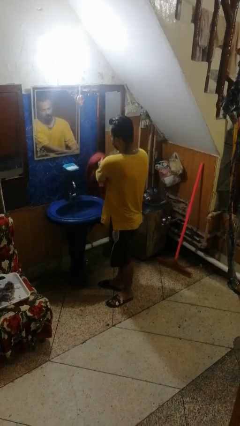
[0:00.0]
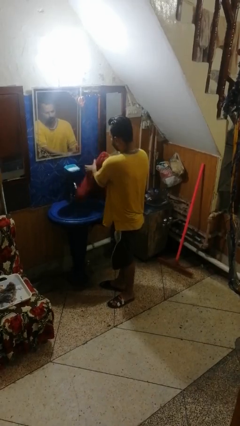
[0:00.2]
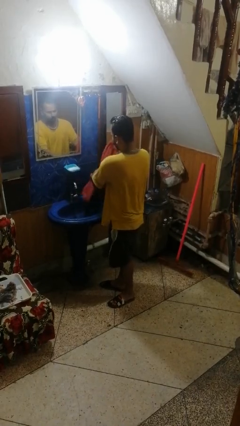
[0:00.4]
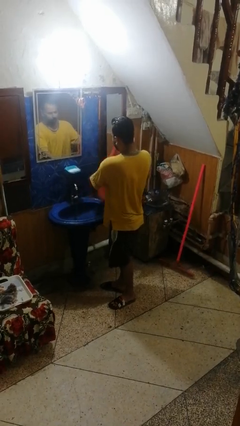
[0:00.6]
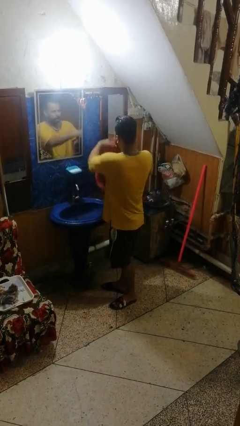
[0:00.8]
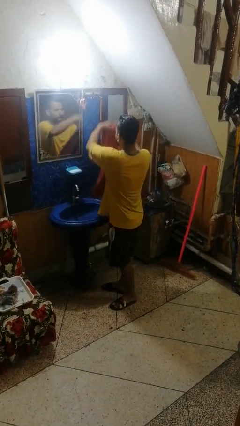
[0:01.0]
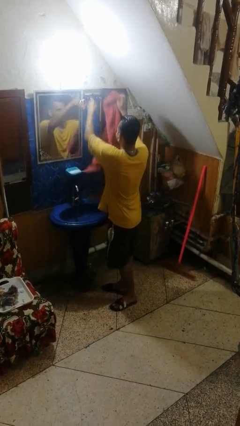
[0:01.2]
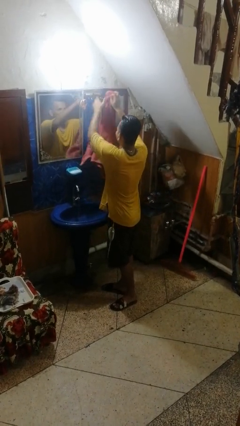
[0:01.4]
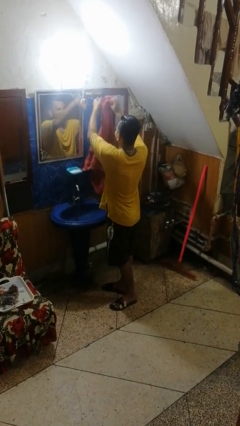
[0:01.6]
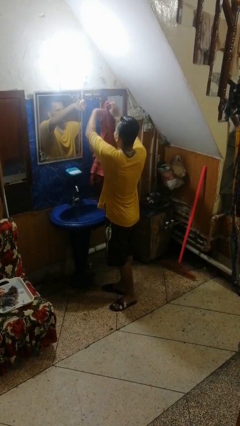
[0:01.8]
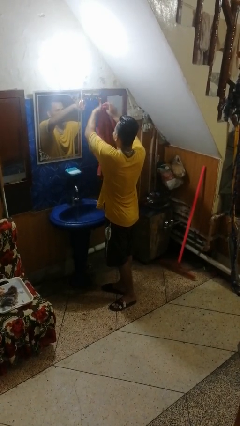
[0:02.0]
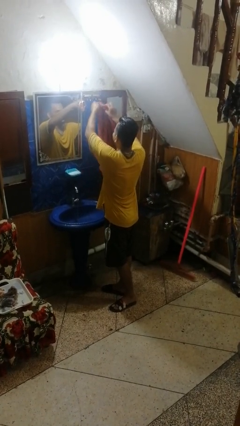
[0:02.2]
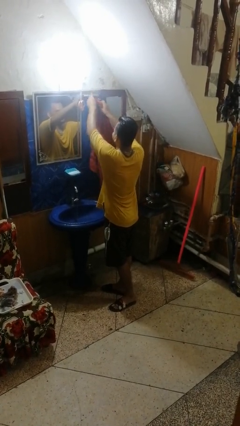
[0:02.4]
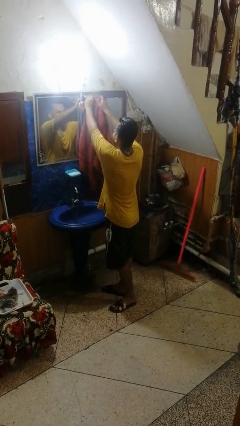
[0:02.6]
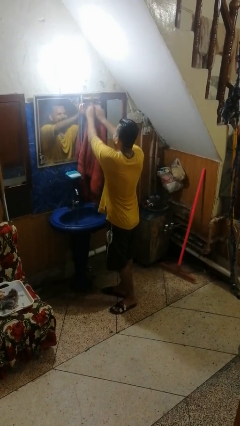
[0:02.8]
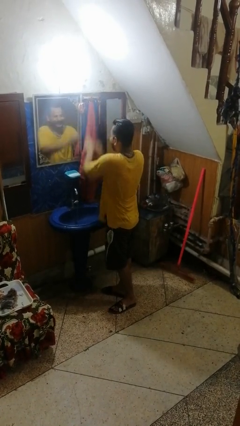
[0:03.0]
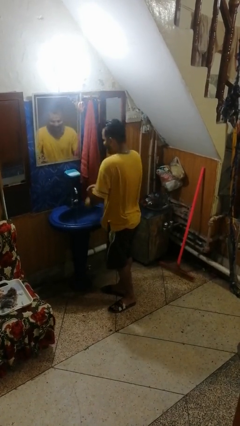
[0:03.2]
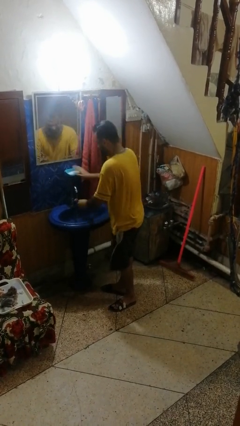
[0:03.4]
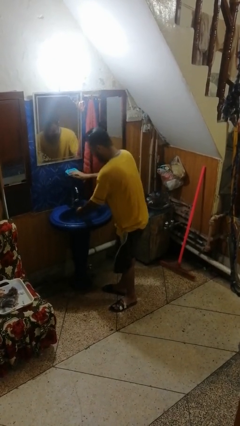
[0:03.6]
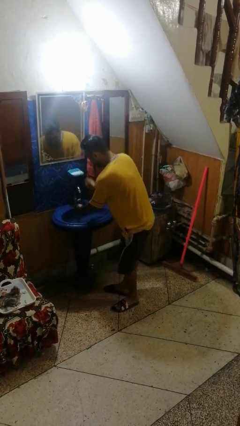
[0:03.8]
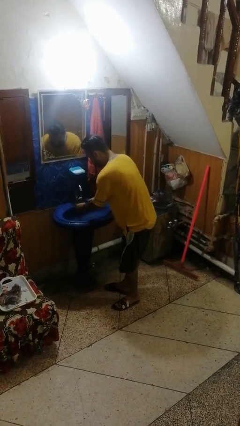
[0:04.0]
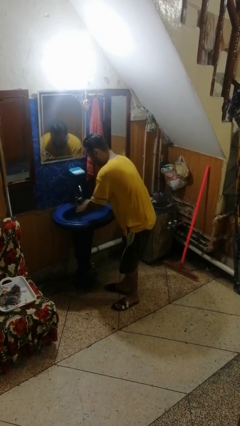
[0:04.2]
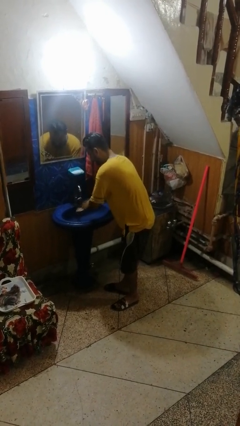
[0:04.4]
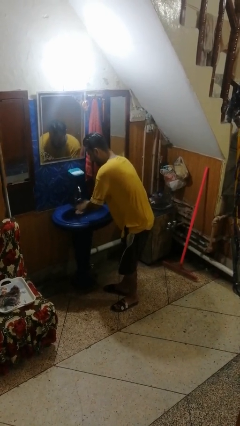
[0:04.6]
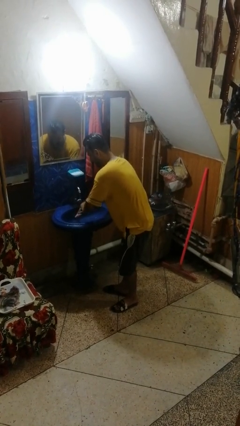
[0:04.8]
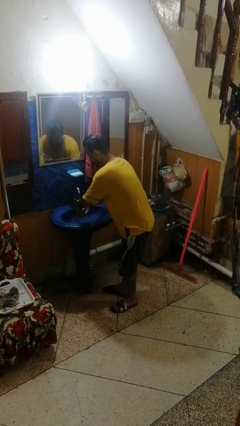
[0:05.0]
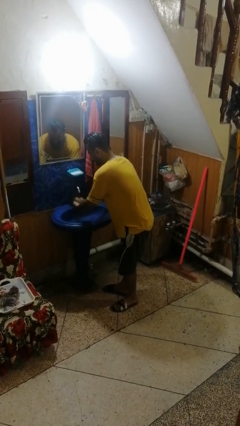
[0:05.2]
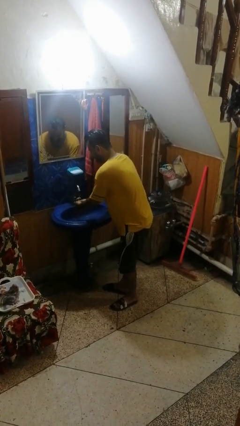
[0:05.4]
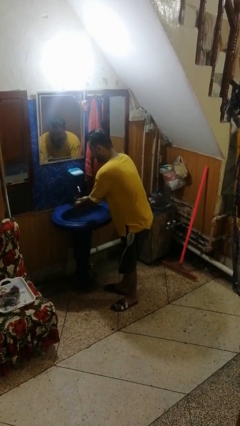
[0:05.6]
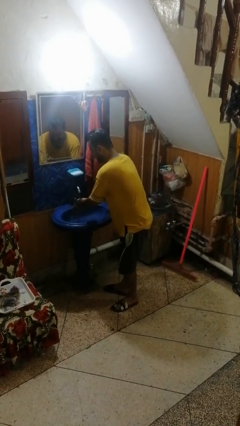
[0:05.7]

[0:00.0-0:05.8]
person washes hands

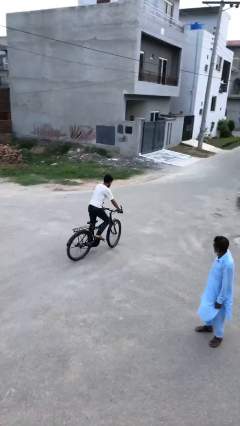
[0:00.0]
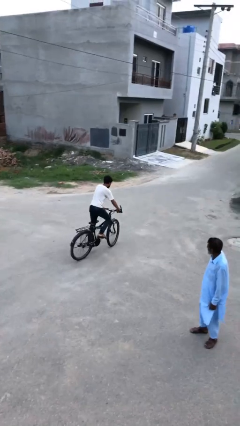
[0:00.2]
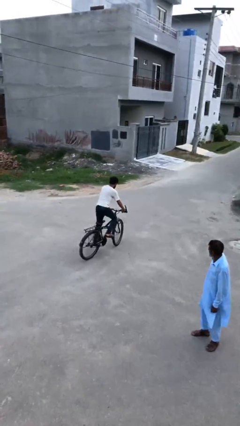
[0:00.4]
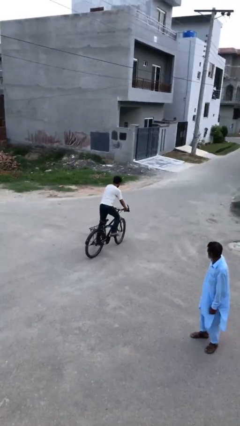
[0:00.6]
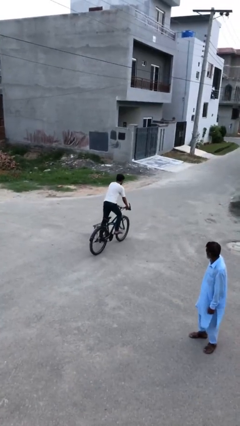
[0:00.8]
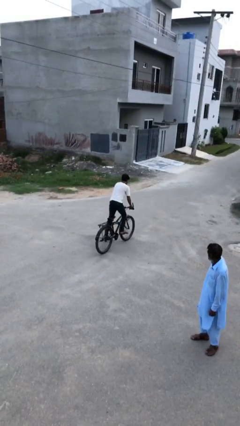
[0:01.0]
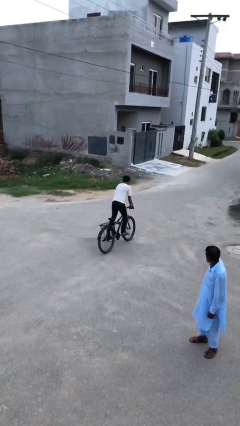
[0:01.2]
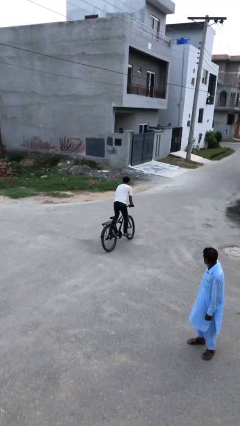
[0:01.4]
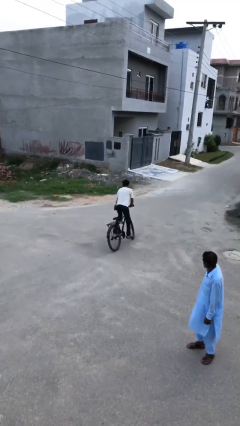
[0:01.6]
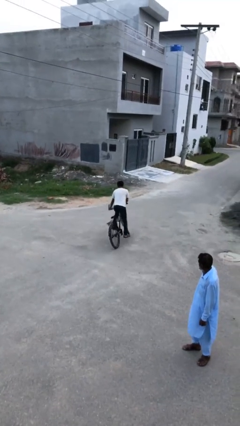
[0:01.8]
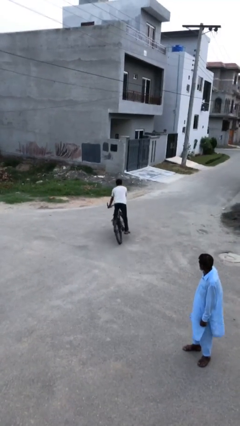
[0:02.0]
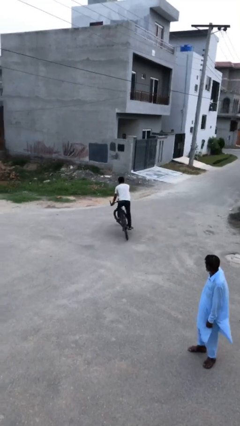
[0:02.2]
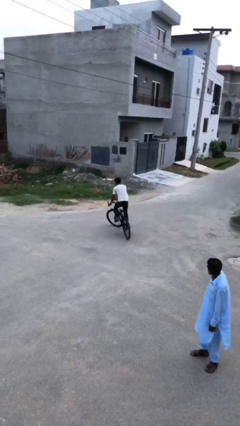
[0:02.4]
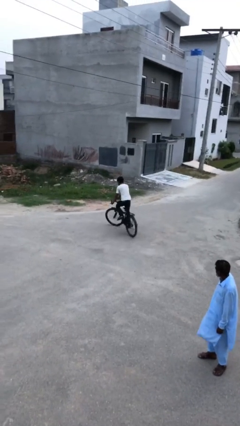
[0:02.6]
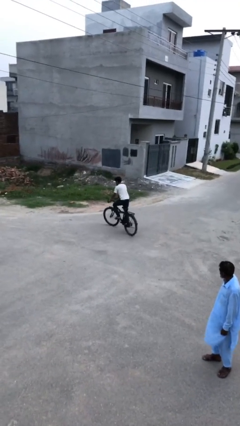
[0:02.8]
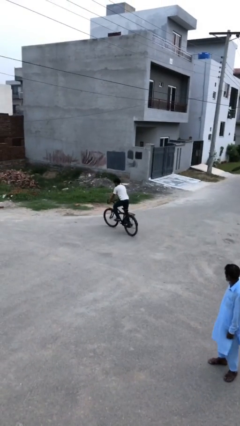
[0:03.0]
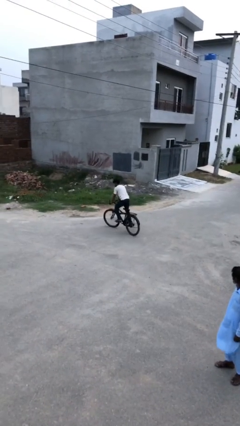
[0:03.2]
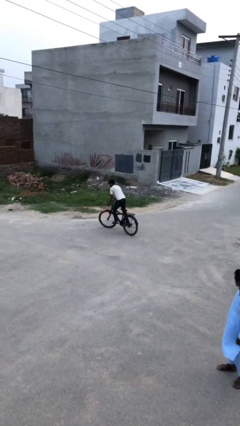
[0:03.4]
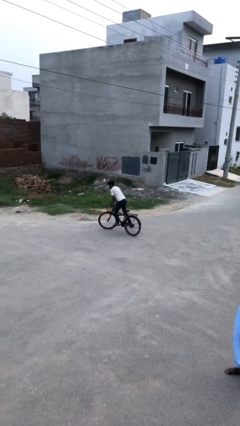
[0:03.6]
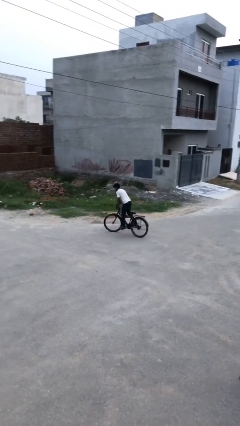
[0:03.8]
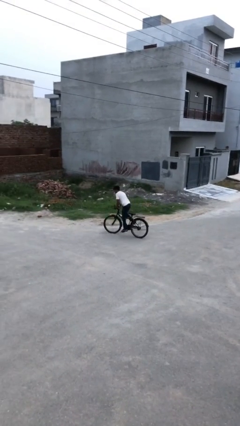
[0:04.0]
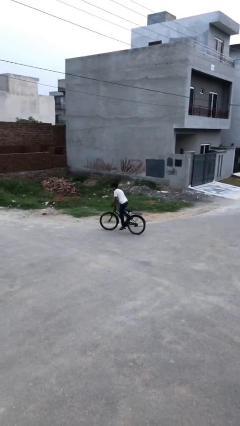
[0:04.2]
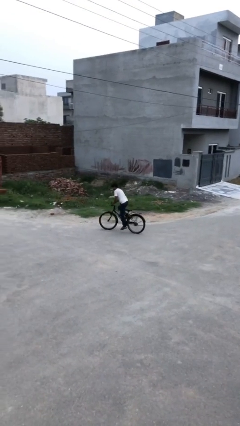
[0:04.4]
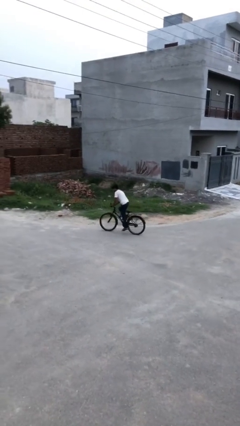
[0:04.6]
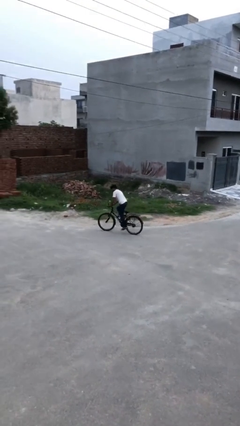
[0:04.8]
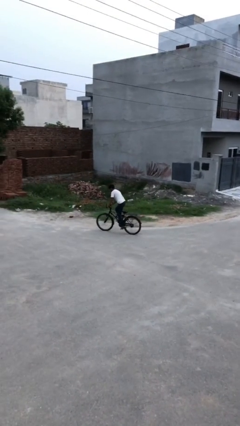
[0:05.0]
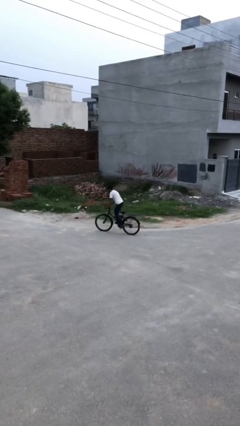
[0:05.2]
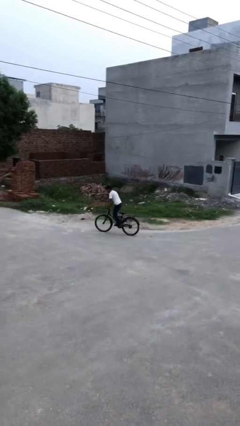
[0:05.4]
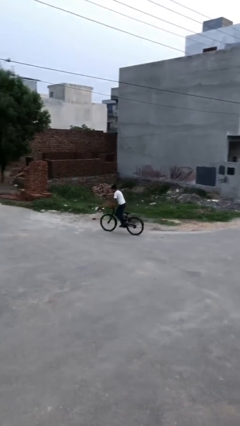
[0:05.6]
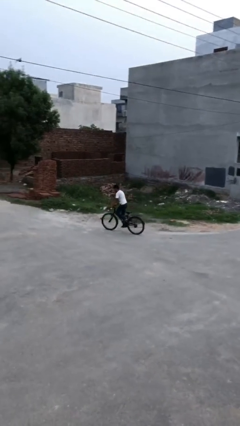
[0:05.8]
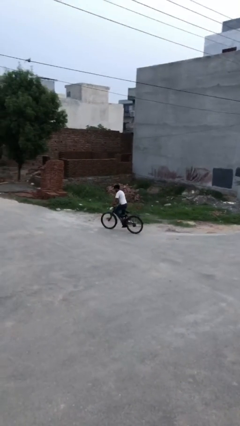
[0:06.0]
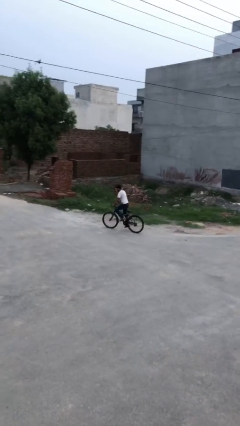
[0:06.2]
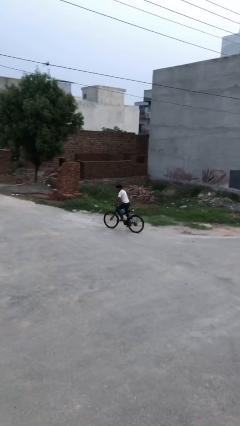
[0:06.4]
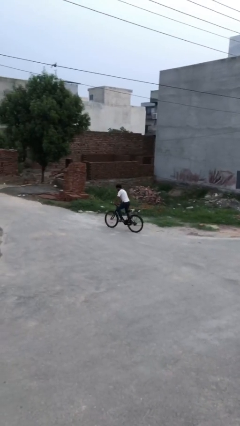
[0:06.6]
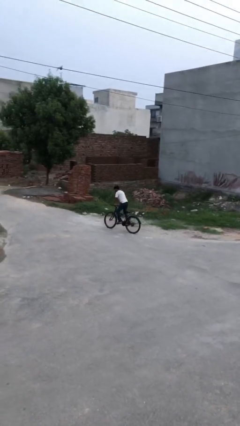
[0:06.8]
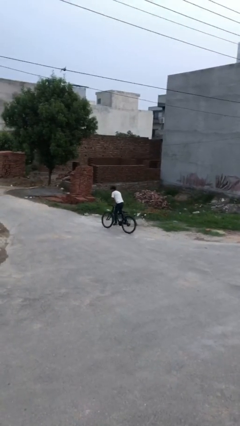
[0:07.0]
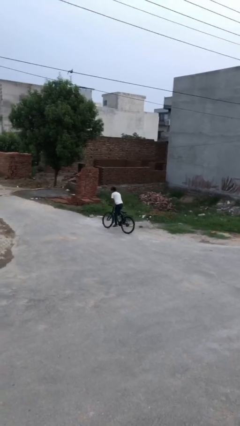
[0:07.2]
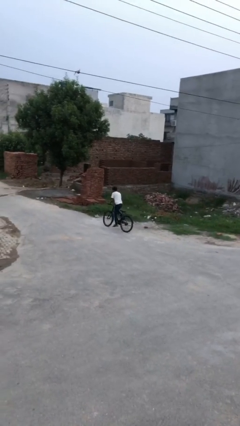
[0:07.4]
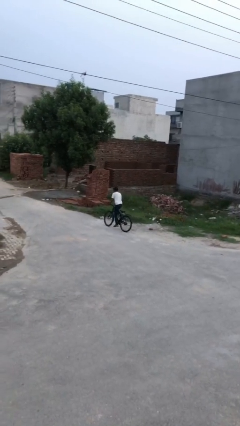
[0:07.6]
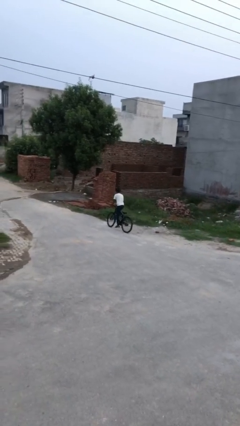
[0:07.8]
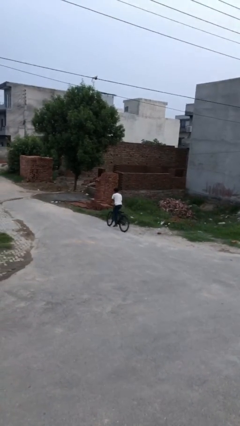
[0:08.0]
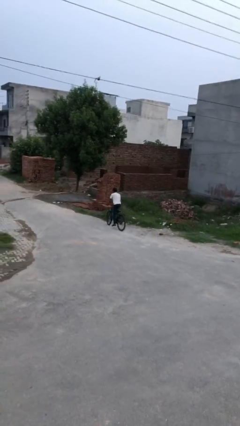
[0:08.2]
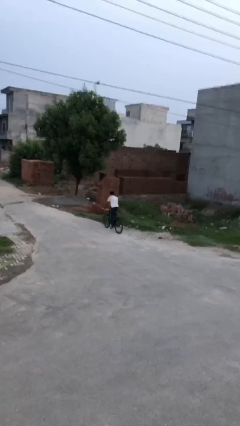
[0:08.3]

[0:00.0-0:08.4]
person rides bicycle

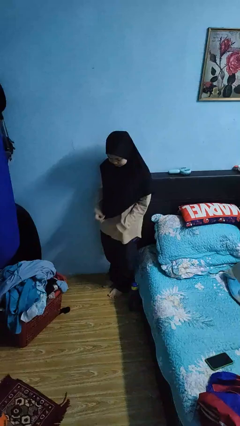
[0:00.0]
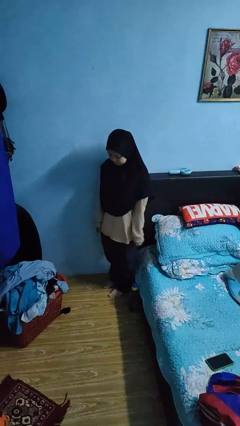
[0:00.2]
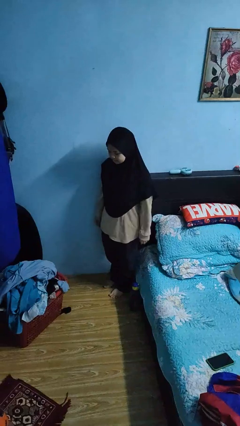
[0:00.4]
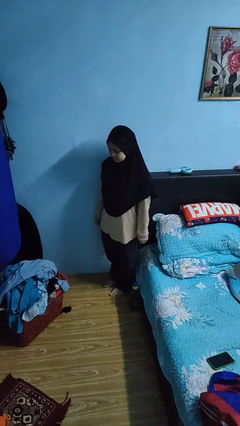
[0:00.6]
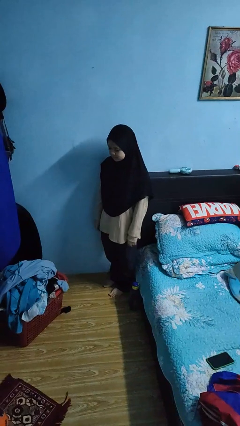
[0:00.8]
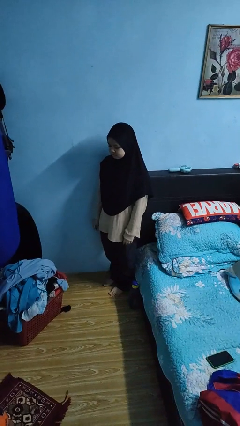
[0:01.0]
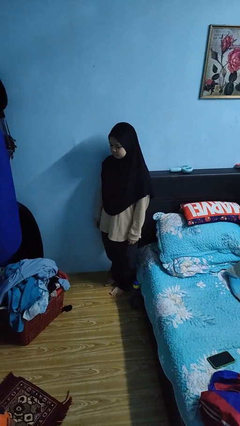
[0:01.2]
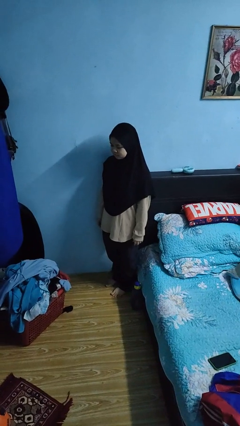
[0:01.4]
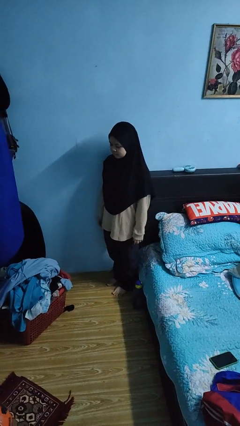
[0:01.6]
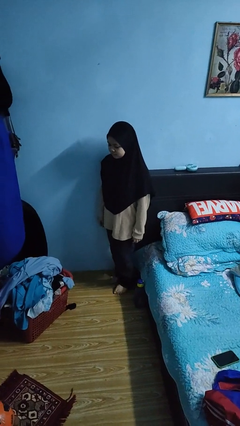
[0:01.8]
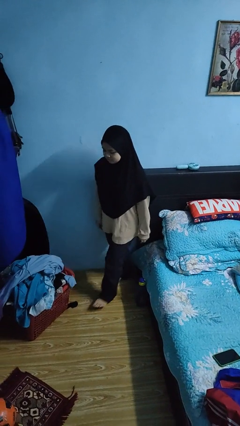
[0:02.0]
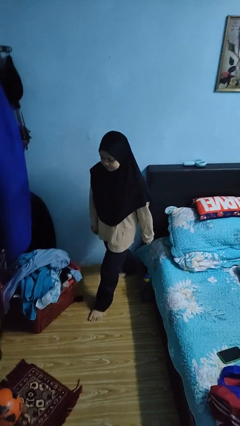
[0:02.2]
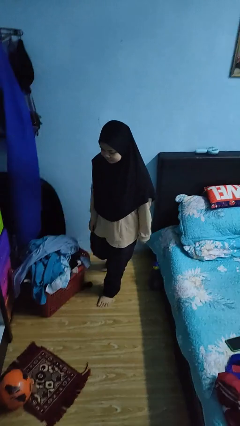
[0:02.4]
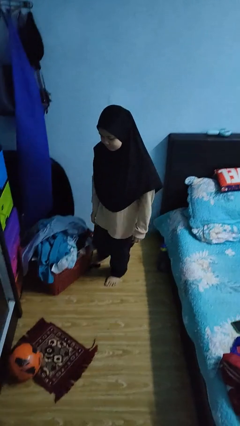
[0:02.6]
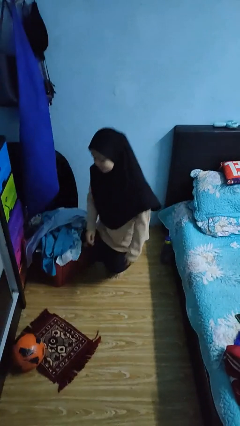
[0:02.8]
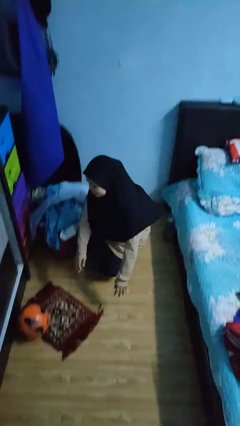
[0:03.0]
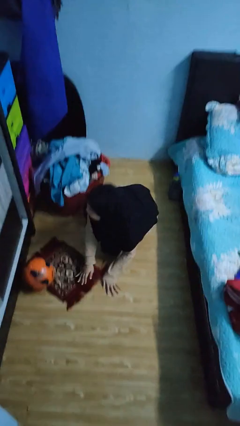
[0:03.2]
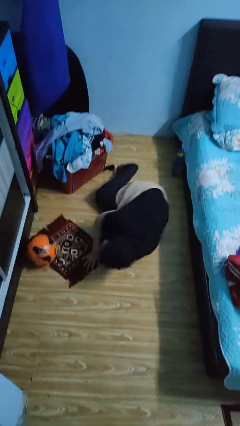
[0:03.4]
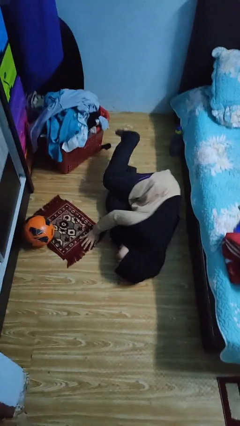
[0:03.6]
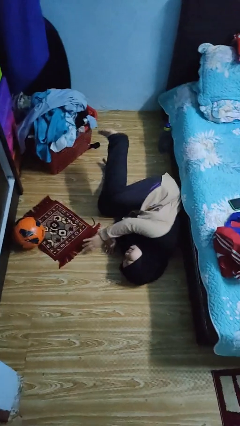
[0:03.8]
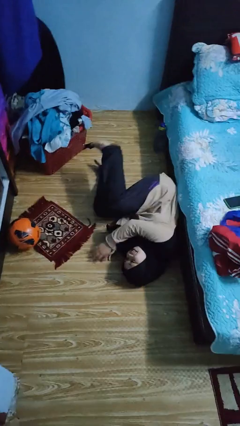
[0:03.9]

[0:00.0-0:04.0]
person trips on object on floor
